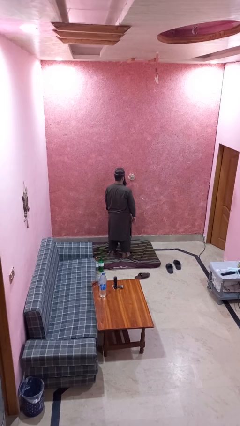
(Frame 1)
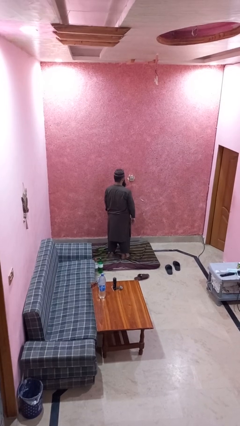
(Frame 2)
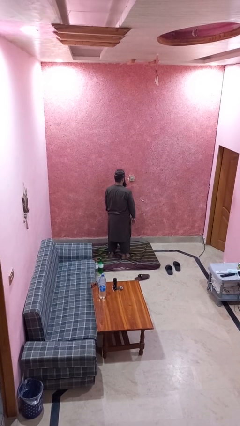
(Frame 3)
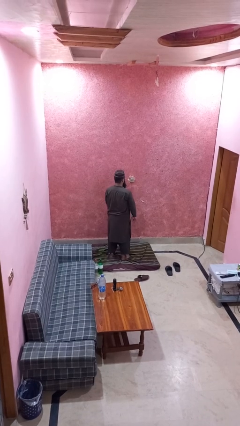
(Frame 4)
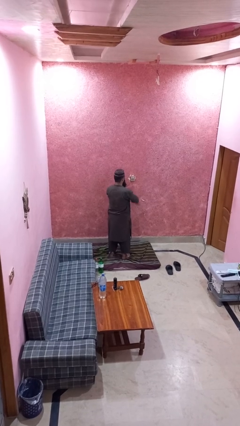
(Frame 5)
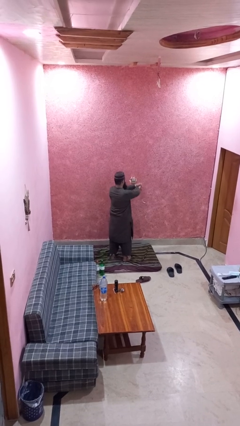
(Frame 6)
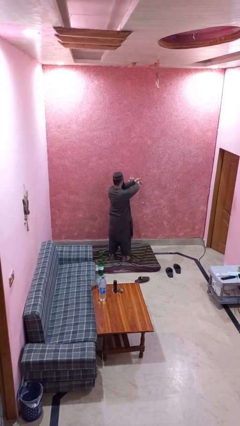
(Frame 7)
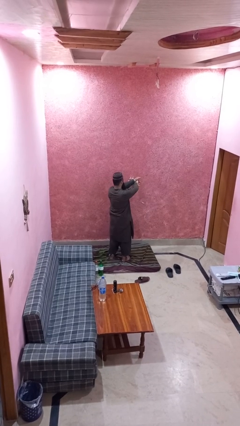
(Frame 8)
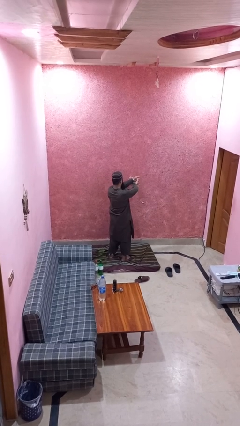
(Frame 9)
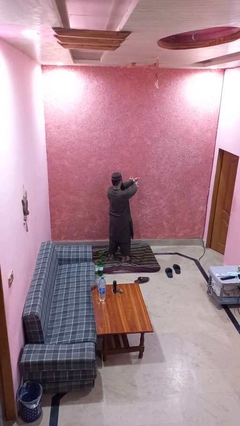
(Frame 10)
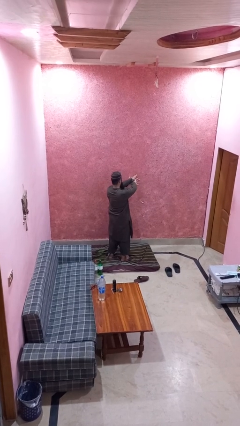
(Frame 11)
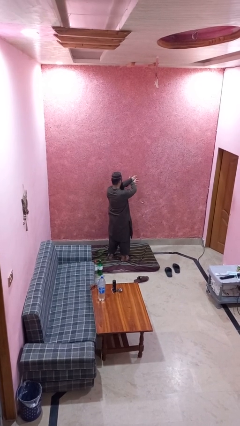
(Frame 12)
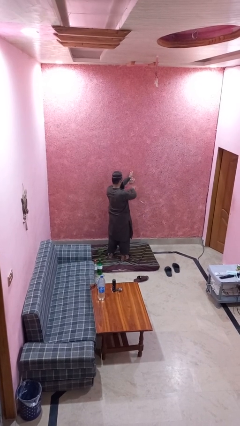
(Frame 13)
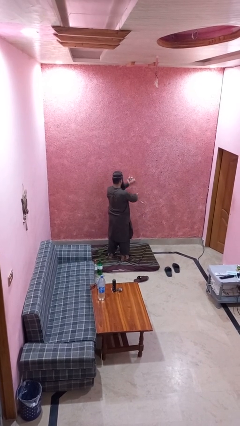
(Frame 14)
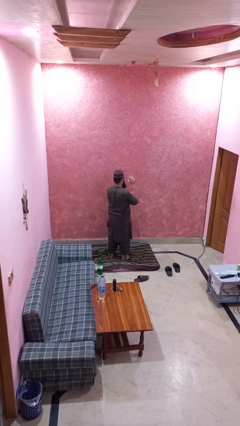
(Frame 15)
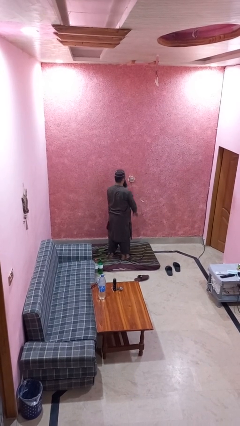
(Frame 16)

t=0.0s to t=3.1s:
person snaps fingers

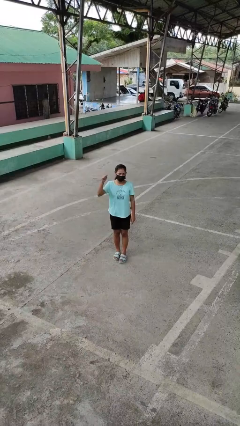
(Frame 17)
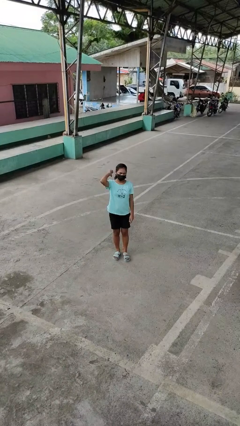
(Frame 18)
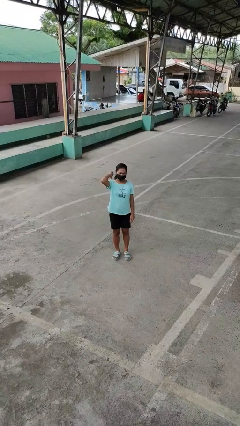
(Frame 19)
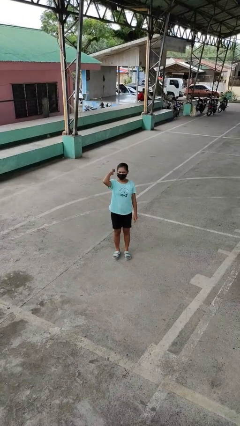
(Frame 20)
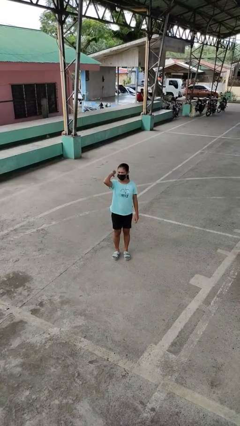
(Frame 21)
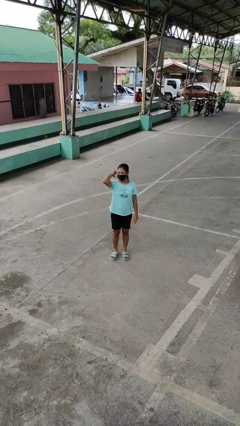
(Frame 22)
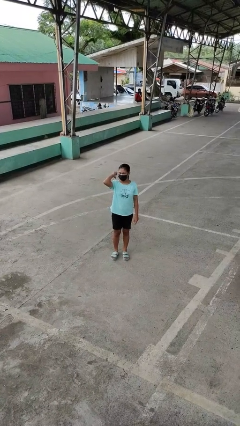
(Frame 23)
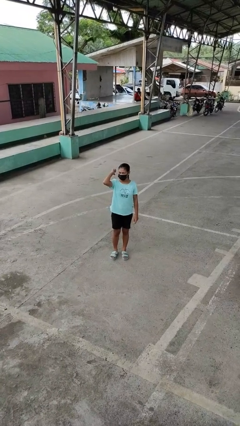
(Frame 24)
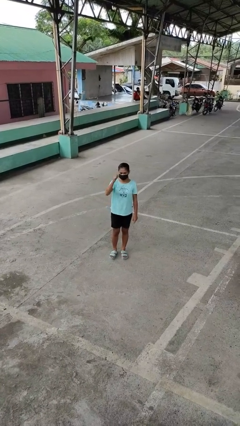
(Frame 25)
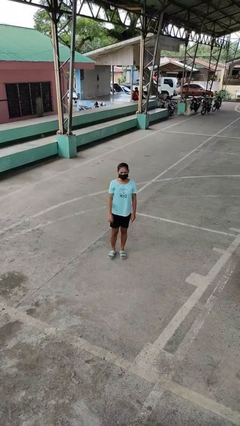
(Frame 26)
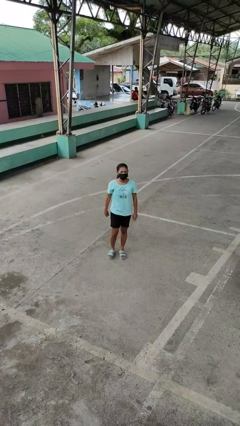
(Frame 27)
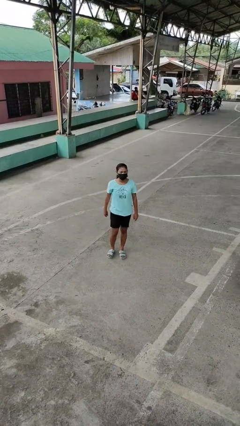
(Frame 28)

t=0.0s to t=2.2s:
person gestures behind me

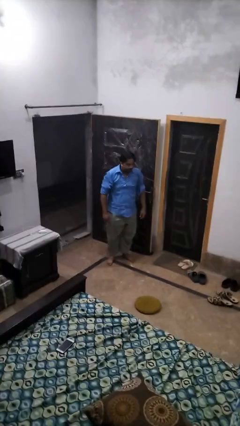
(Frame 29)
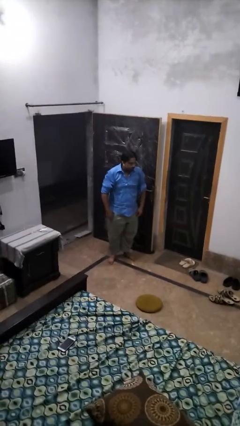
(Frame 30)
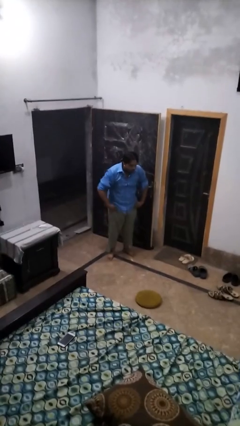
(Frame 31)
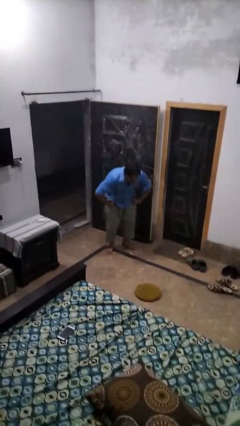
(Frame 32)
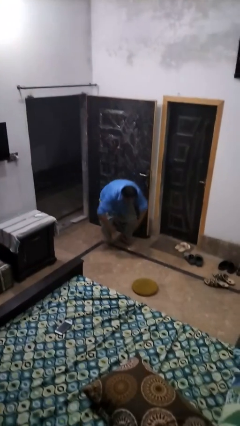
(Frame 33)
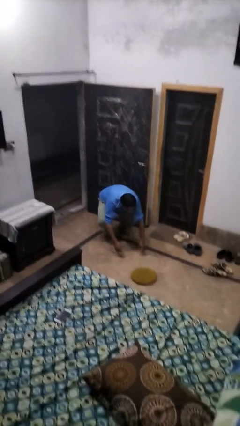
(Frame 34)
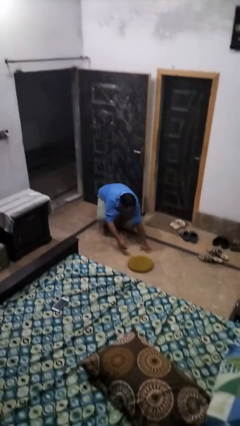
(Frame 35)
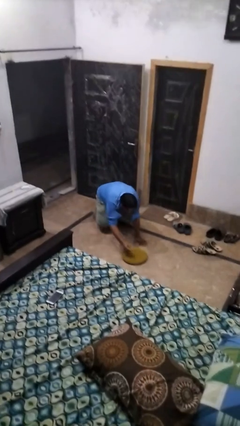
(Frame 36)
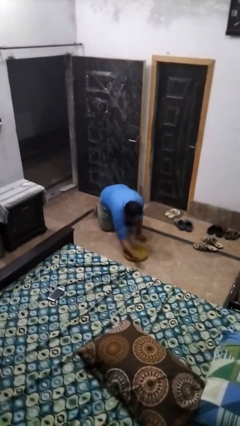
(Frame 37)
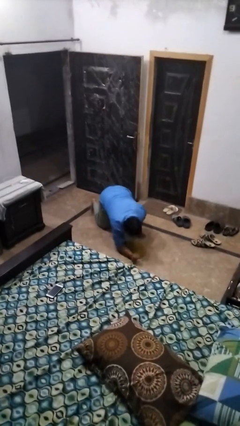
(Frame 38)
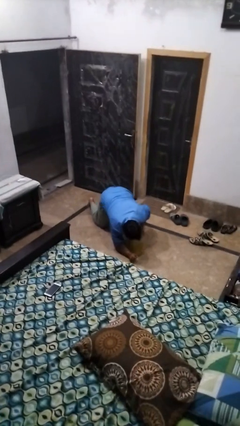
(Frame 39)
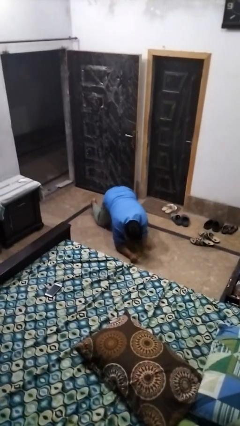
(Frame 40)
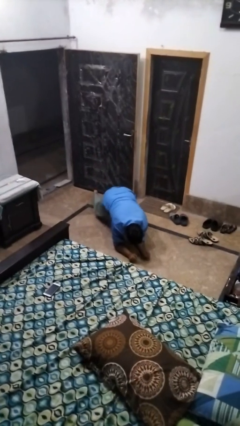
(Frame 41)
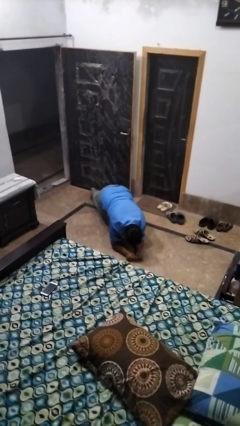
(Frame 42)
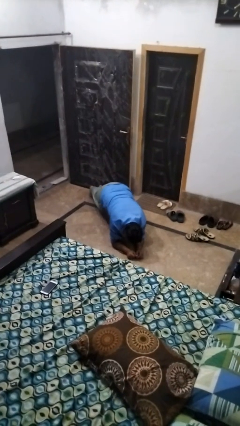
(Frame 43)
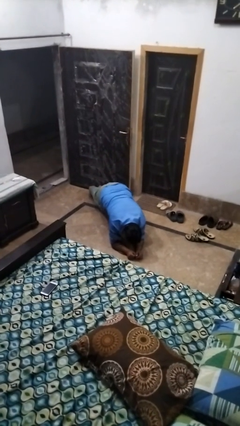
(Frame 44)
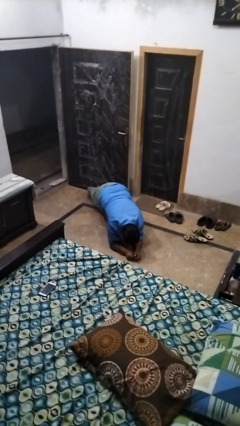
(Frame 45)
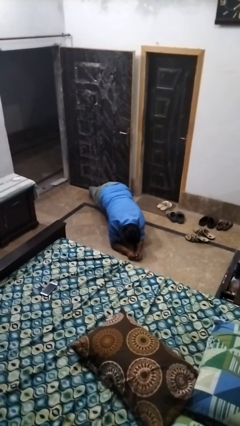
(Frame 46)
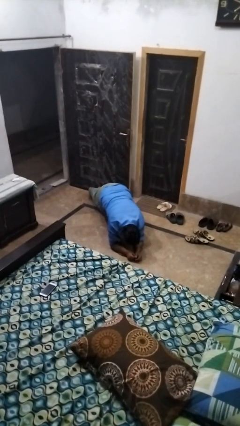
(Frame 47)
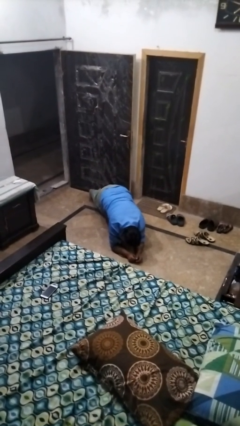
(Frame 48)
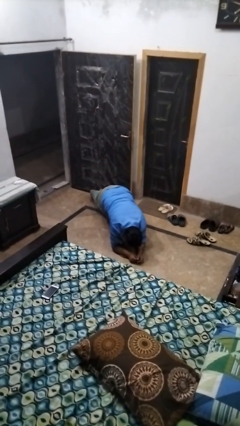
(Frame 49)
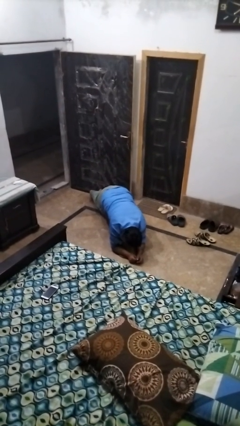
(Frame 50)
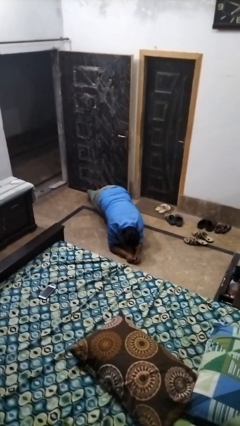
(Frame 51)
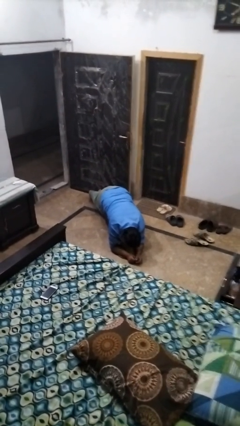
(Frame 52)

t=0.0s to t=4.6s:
person exercises with plank

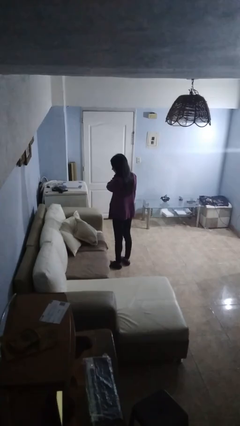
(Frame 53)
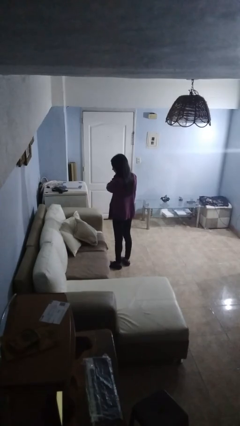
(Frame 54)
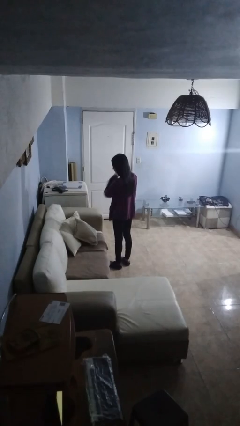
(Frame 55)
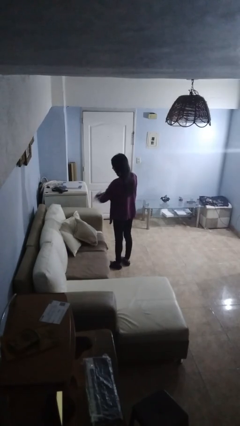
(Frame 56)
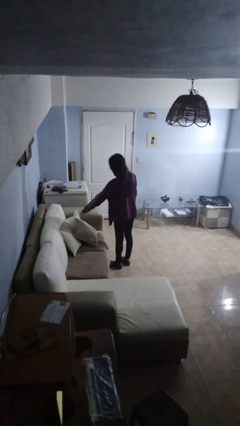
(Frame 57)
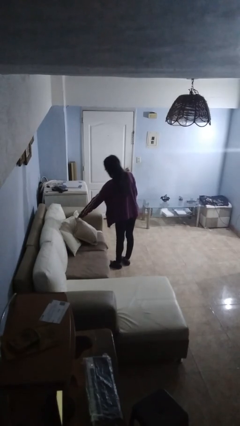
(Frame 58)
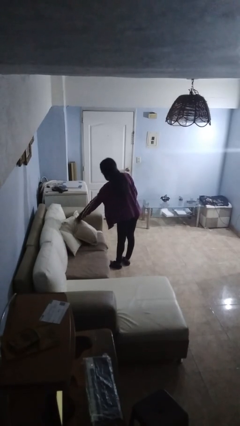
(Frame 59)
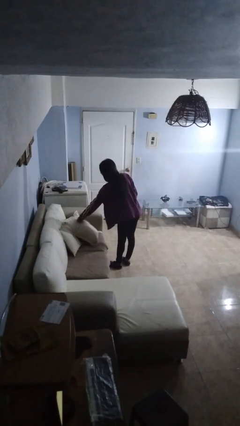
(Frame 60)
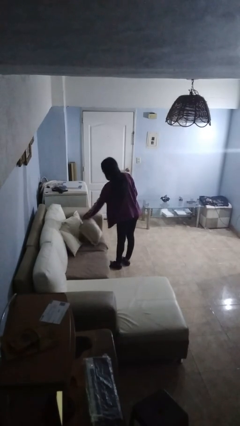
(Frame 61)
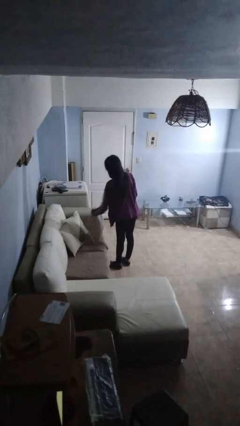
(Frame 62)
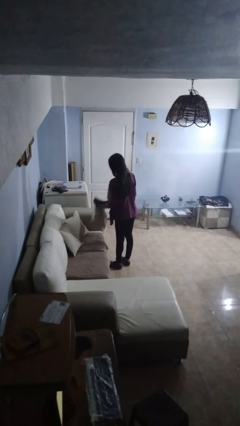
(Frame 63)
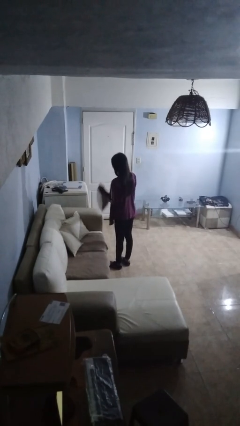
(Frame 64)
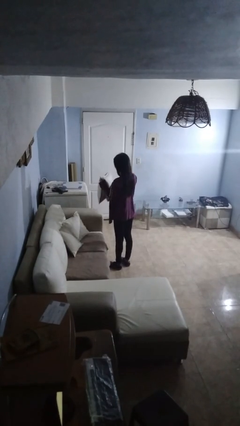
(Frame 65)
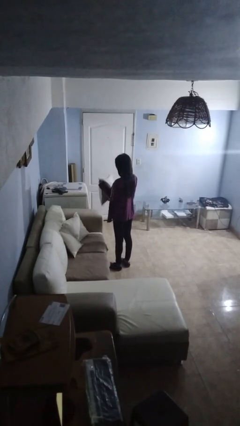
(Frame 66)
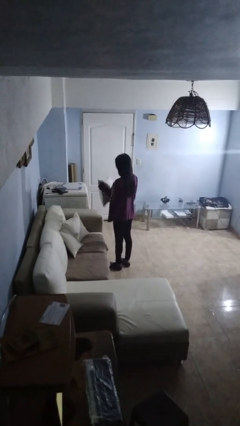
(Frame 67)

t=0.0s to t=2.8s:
person puts down object on couch

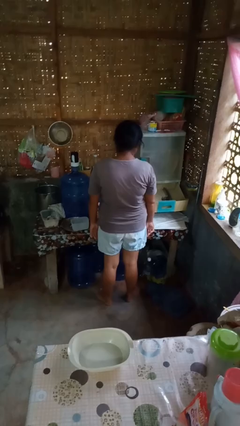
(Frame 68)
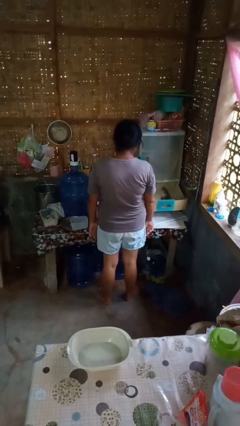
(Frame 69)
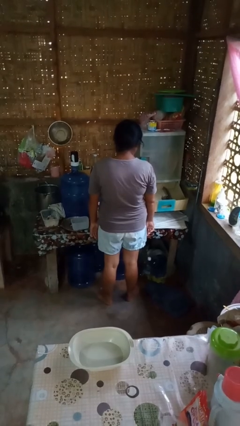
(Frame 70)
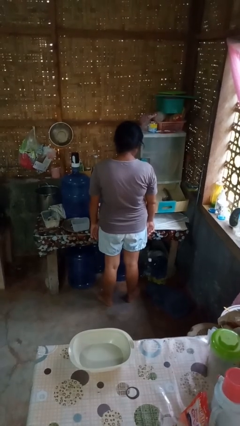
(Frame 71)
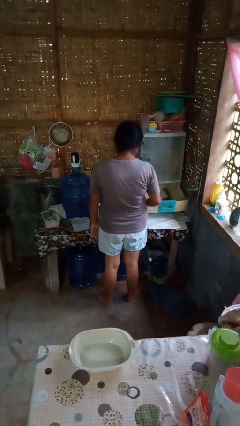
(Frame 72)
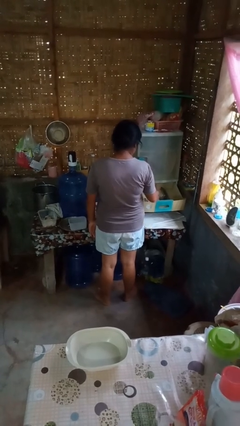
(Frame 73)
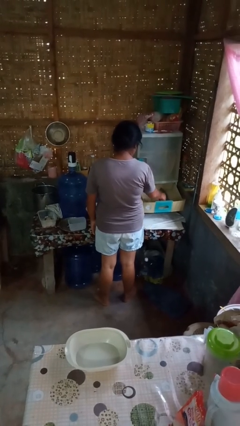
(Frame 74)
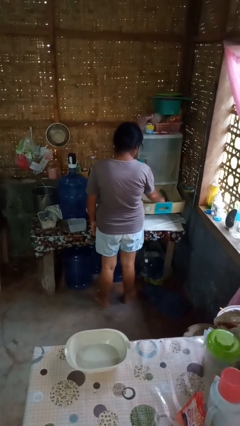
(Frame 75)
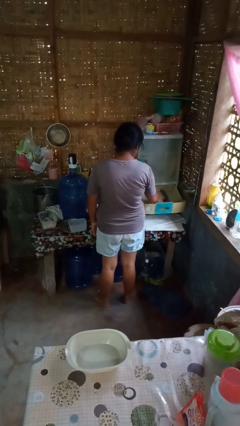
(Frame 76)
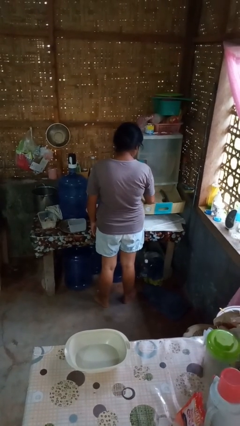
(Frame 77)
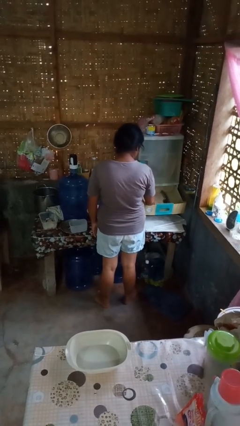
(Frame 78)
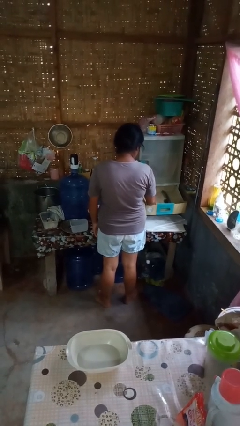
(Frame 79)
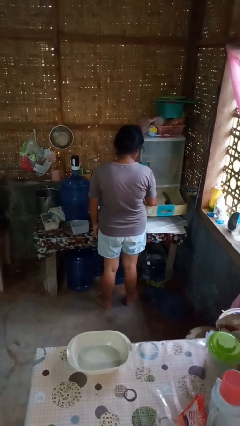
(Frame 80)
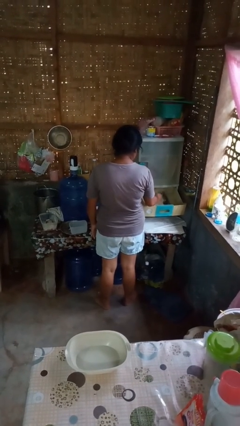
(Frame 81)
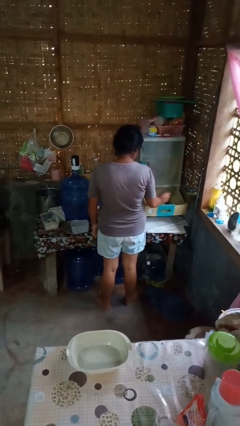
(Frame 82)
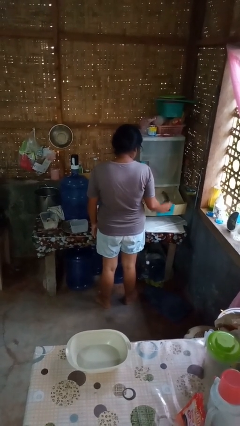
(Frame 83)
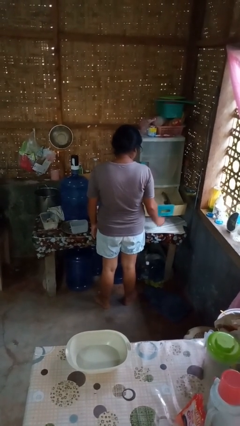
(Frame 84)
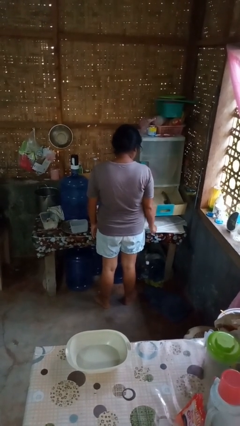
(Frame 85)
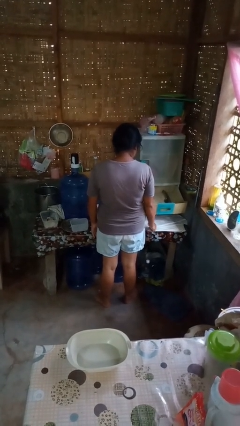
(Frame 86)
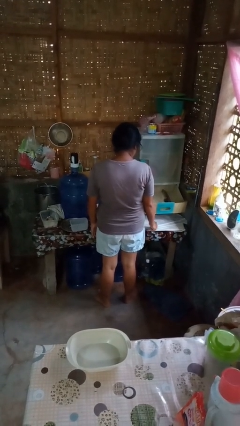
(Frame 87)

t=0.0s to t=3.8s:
person takes object from kitchen drawer

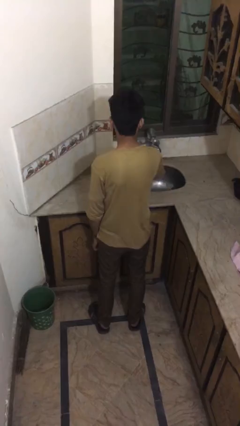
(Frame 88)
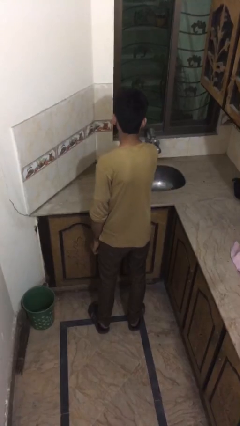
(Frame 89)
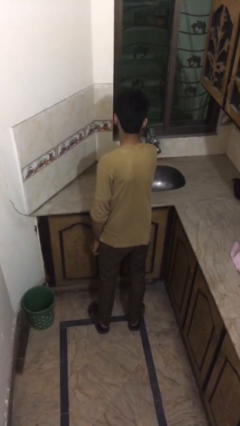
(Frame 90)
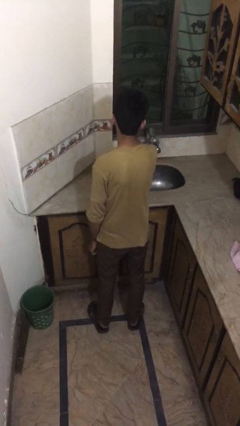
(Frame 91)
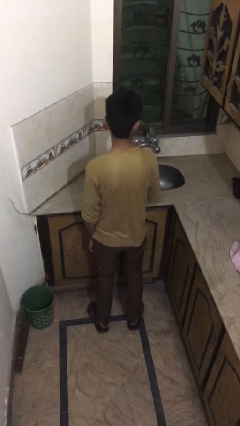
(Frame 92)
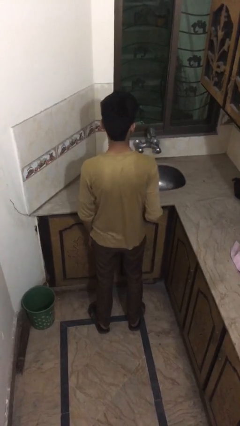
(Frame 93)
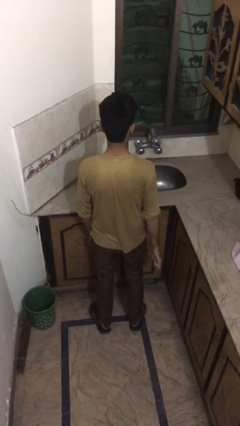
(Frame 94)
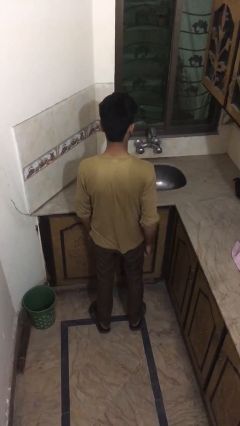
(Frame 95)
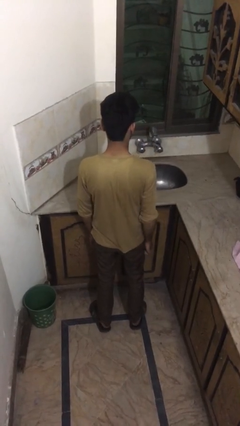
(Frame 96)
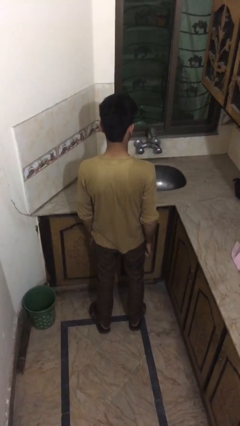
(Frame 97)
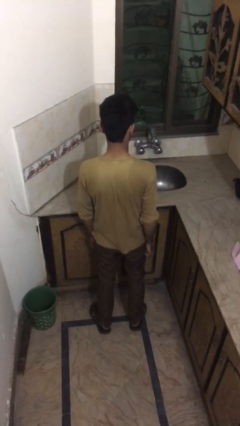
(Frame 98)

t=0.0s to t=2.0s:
person turns off faucet
